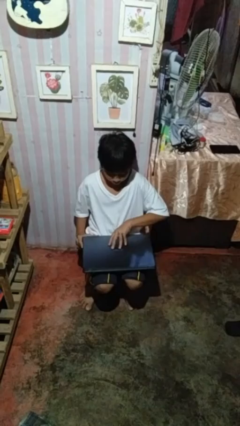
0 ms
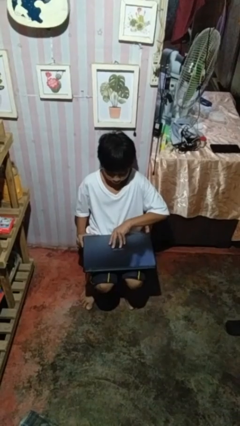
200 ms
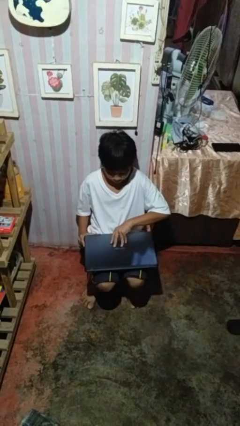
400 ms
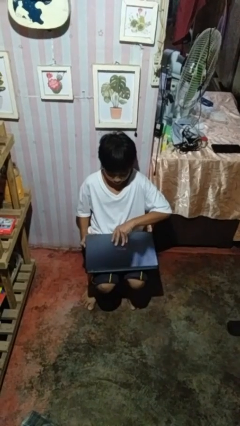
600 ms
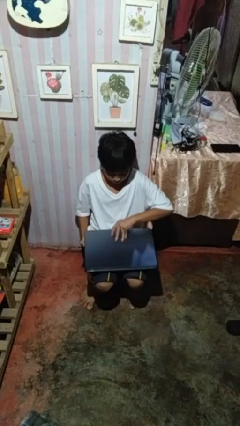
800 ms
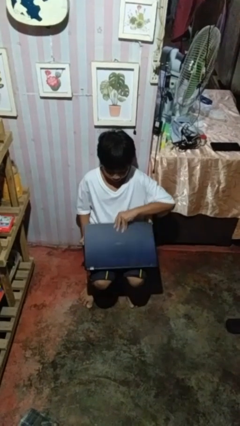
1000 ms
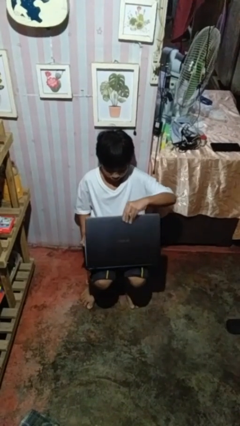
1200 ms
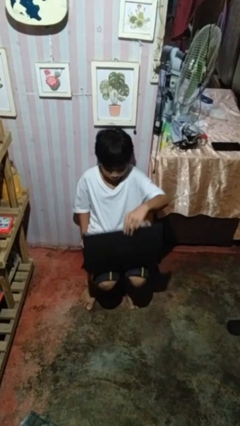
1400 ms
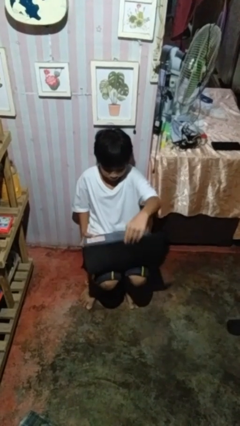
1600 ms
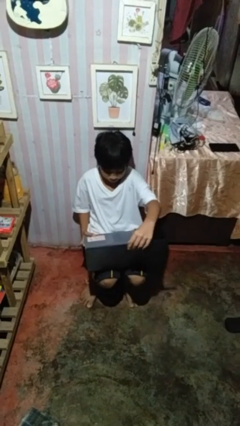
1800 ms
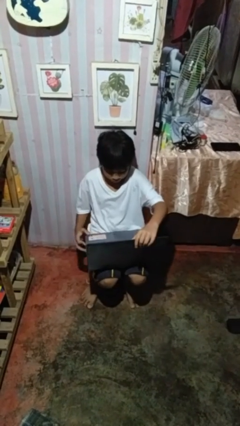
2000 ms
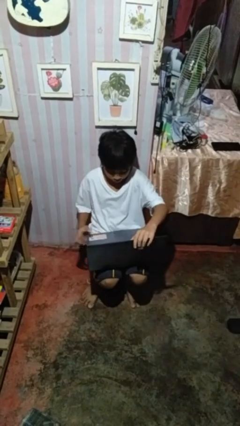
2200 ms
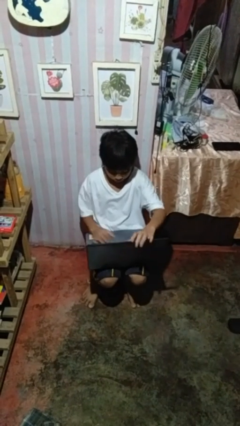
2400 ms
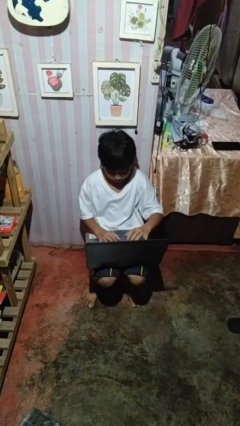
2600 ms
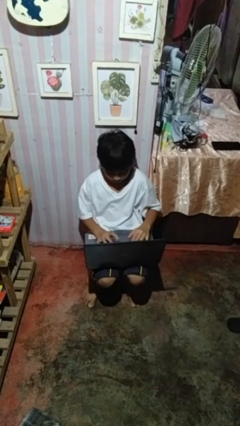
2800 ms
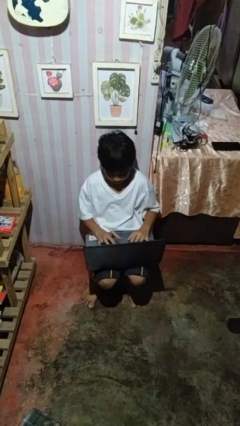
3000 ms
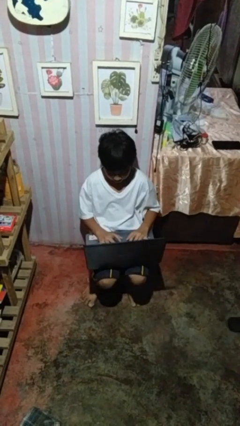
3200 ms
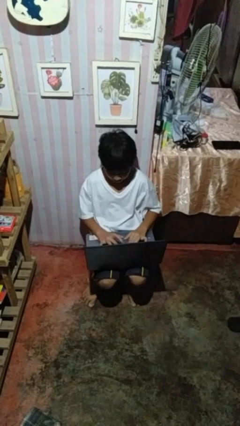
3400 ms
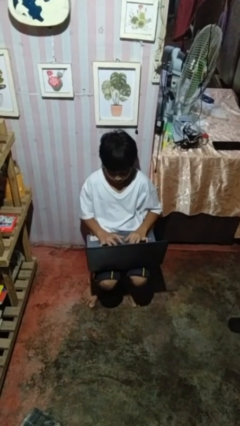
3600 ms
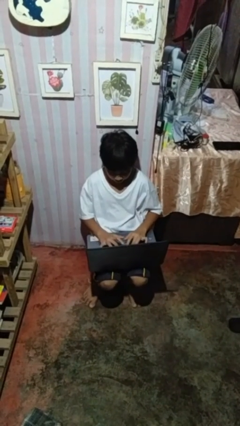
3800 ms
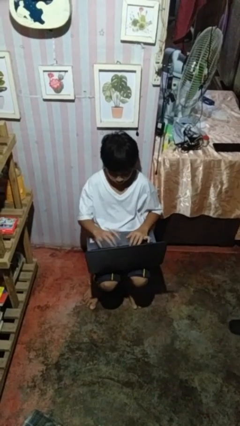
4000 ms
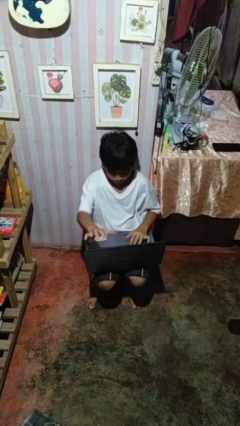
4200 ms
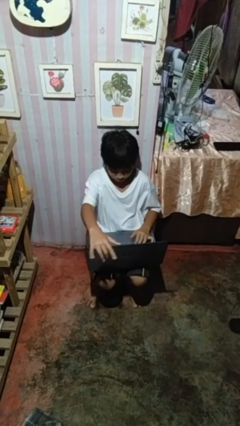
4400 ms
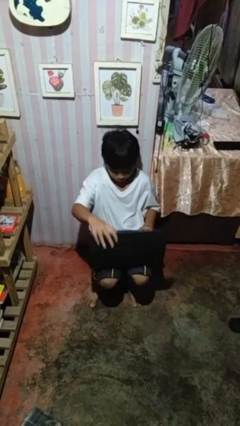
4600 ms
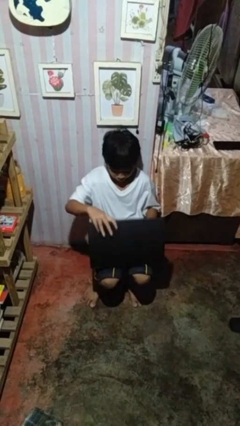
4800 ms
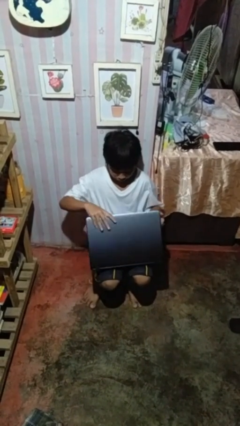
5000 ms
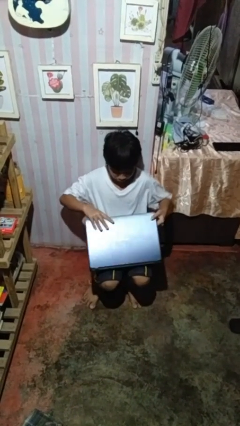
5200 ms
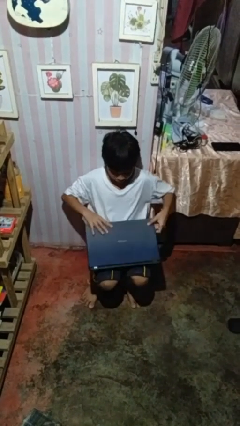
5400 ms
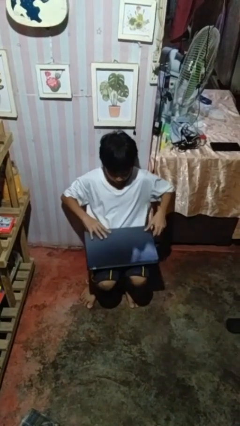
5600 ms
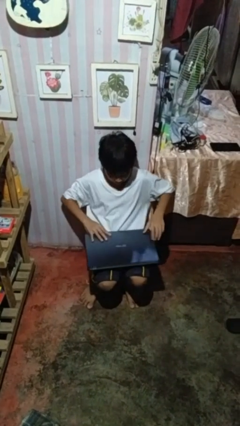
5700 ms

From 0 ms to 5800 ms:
person interacts with laptop

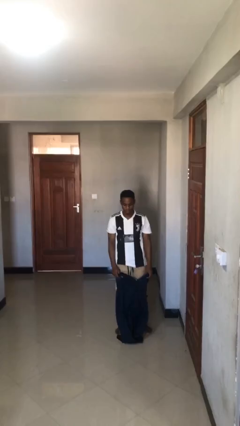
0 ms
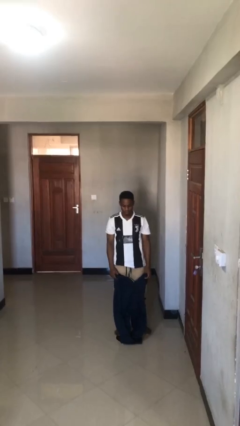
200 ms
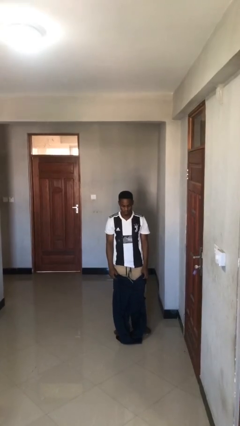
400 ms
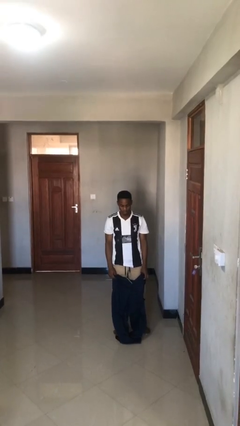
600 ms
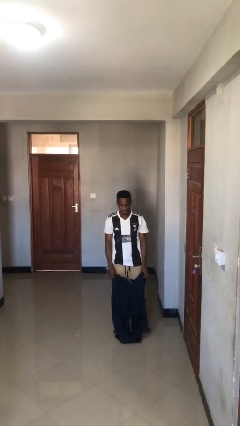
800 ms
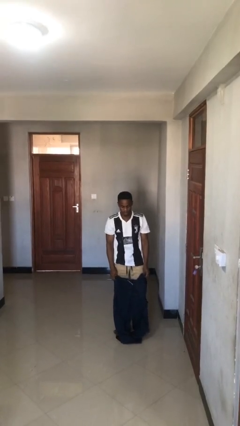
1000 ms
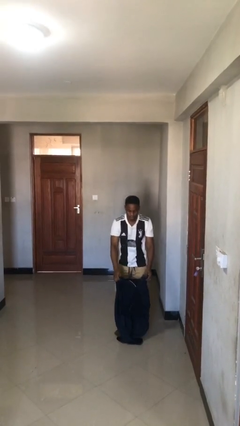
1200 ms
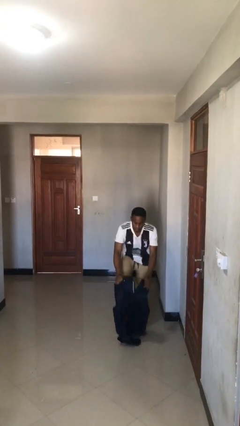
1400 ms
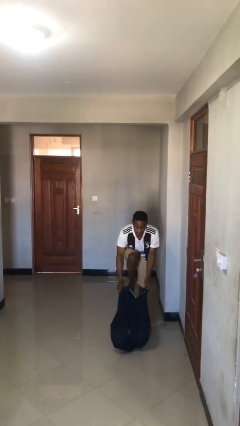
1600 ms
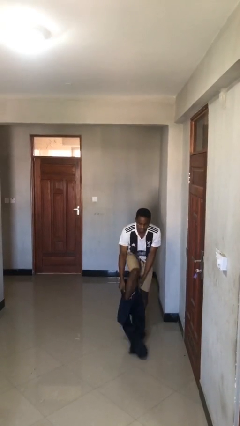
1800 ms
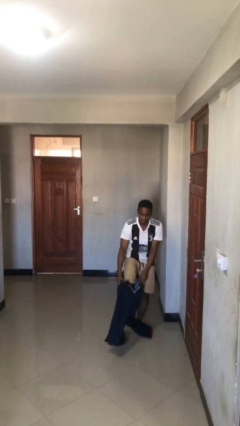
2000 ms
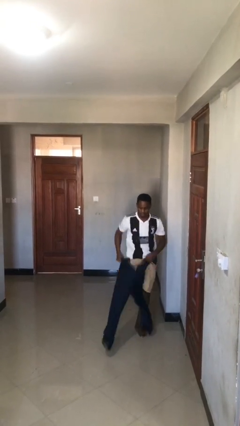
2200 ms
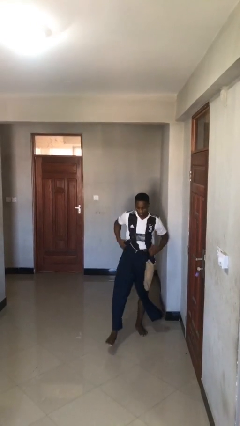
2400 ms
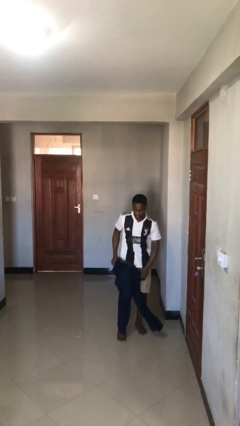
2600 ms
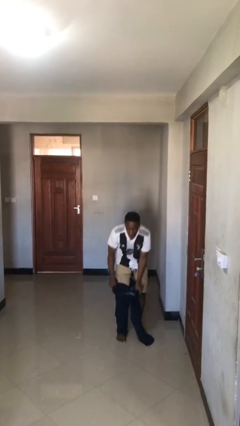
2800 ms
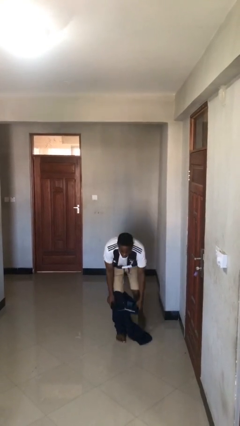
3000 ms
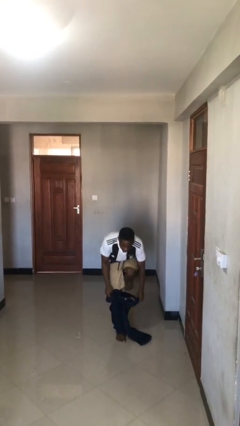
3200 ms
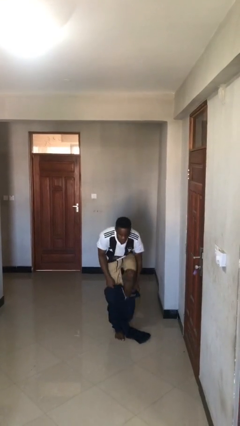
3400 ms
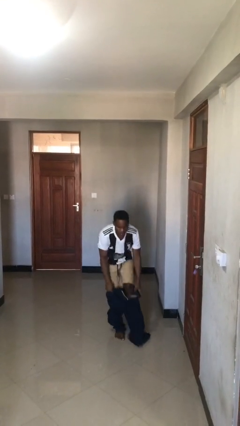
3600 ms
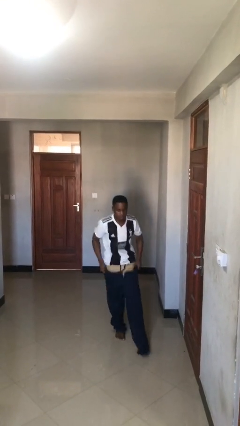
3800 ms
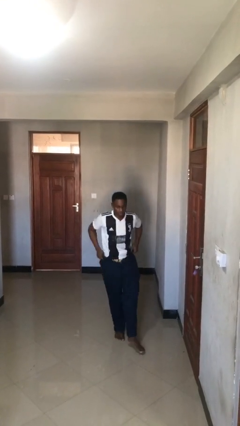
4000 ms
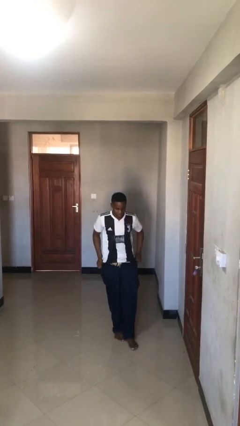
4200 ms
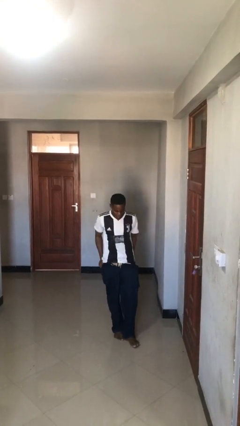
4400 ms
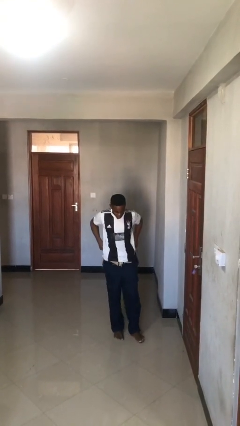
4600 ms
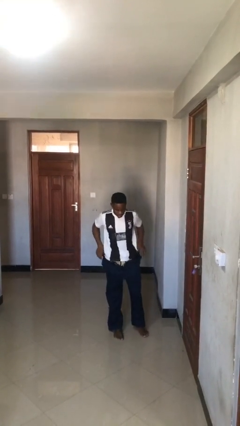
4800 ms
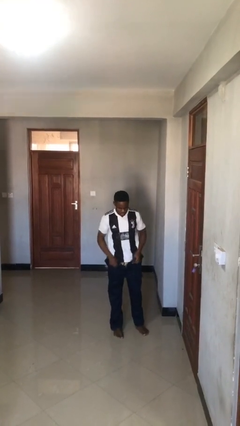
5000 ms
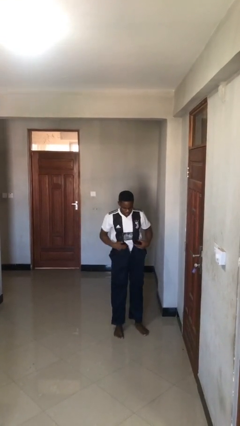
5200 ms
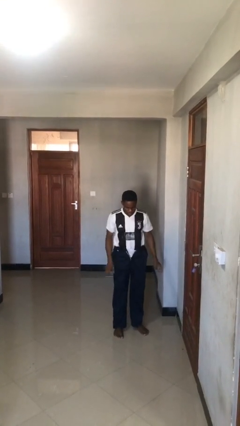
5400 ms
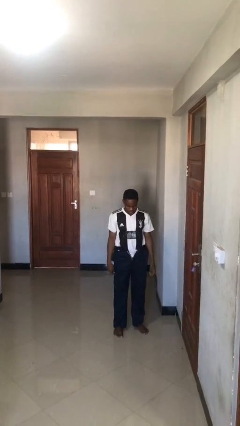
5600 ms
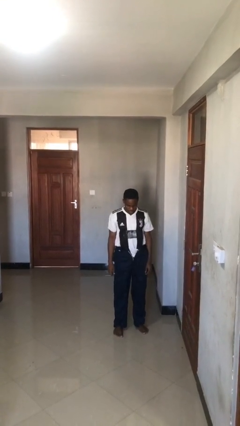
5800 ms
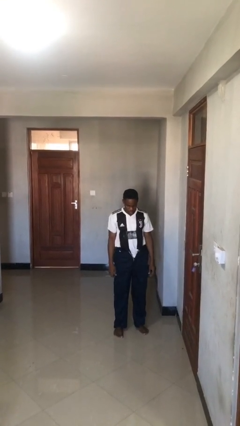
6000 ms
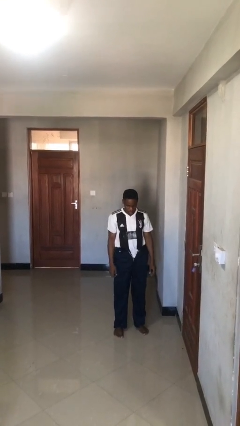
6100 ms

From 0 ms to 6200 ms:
person puts on pants

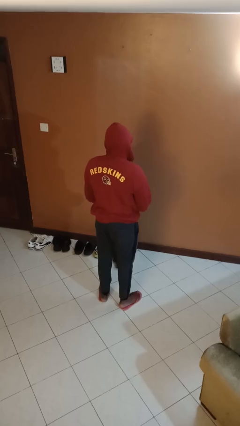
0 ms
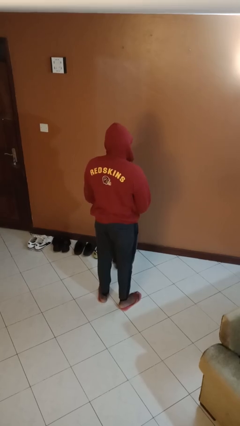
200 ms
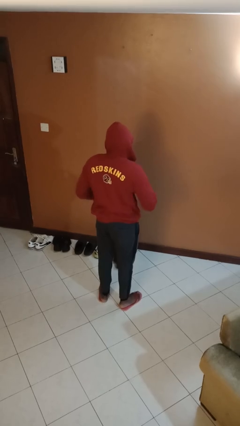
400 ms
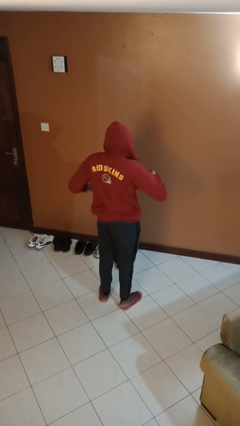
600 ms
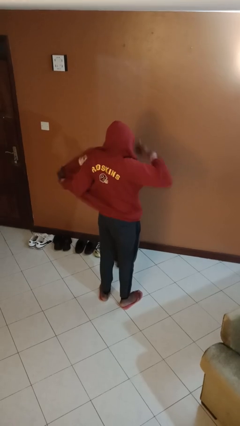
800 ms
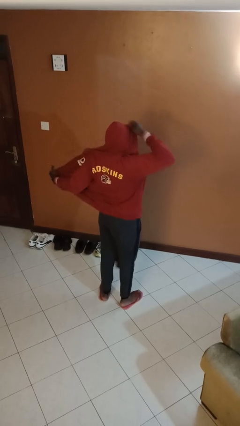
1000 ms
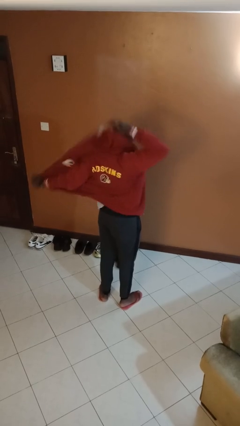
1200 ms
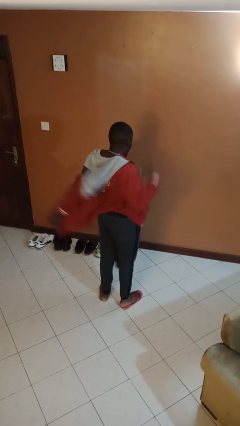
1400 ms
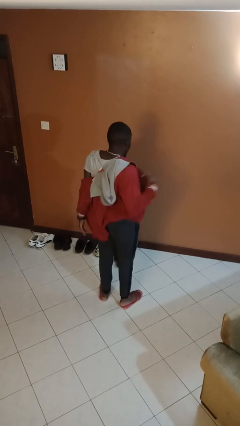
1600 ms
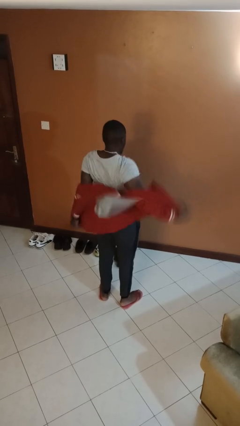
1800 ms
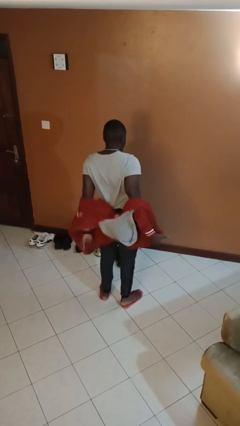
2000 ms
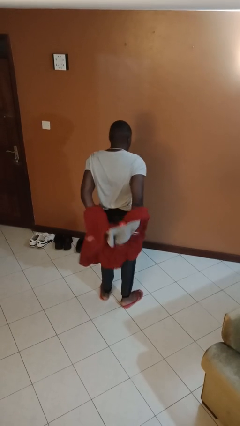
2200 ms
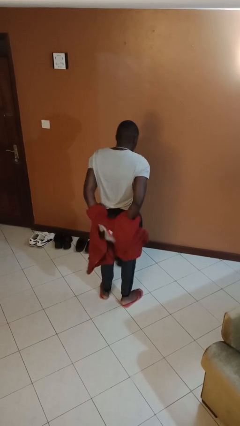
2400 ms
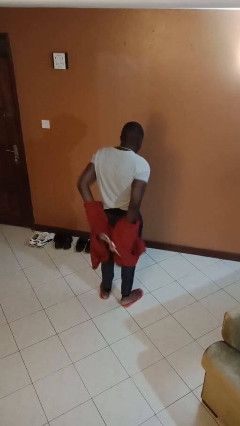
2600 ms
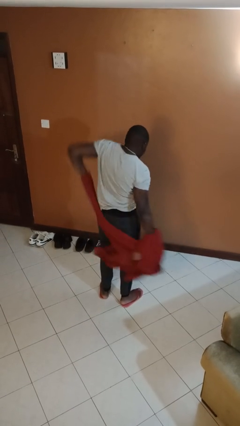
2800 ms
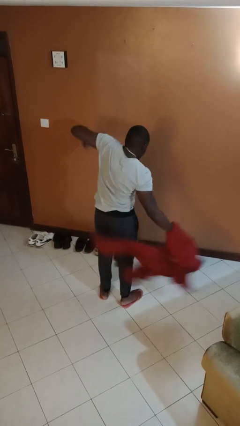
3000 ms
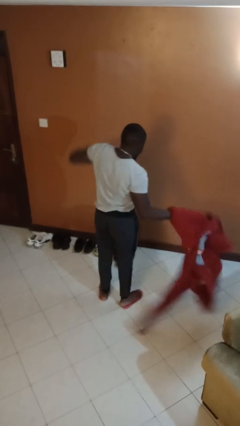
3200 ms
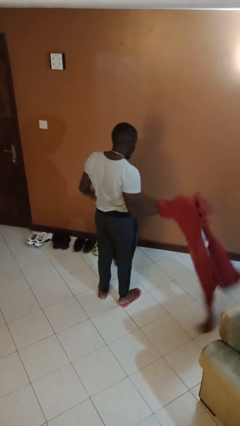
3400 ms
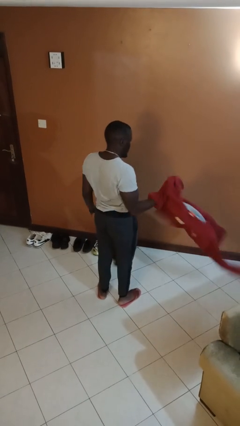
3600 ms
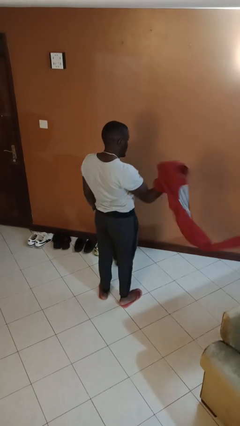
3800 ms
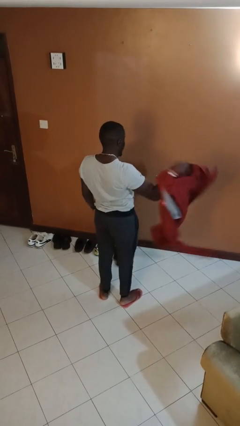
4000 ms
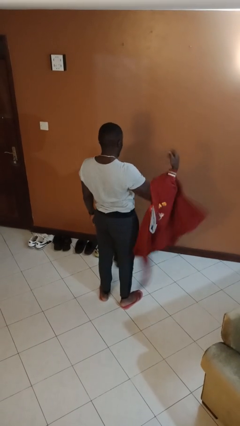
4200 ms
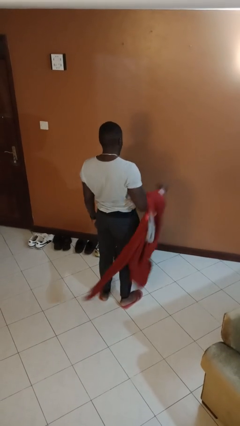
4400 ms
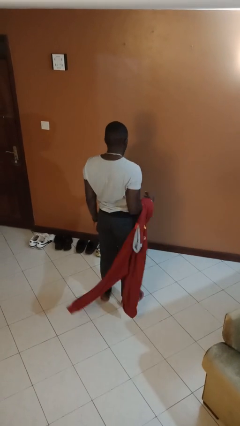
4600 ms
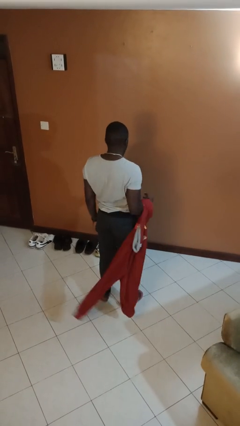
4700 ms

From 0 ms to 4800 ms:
person takes off hoodie

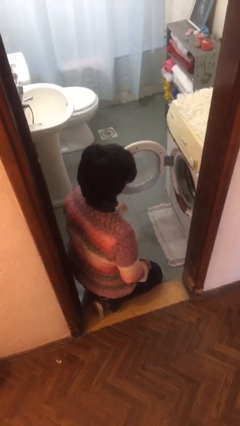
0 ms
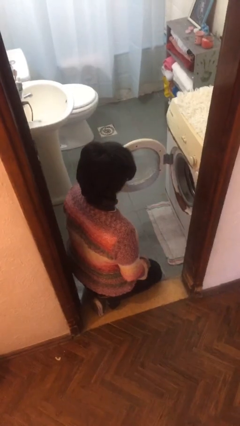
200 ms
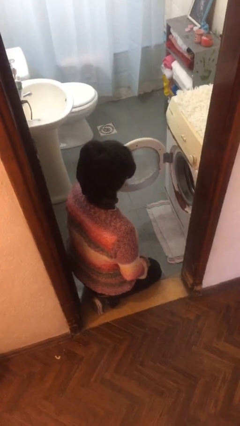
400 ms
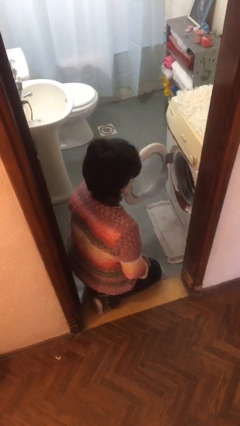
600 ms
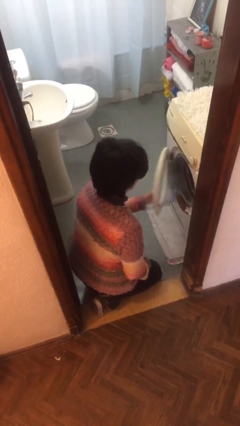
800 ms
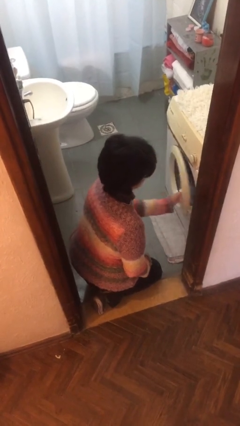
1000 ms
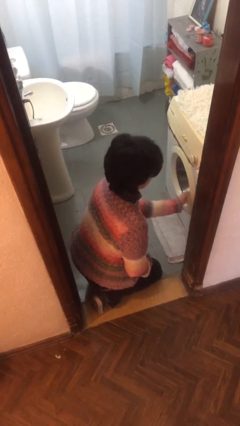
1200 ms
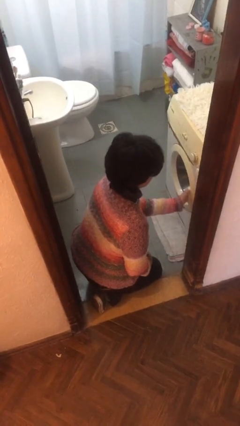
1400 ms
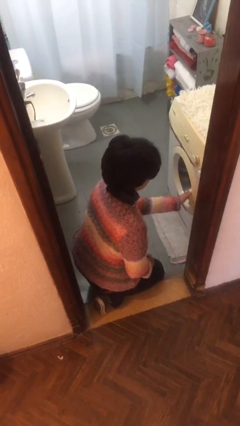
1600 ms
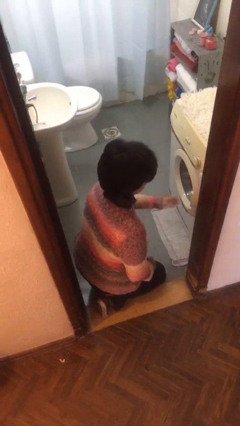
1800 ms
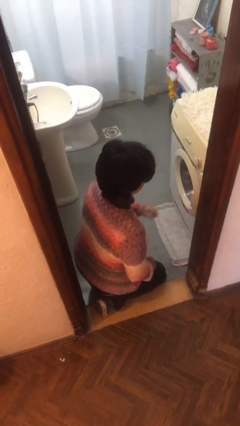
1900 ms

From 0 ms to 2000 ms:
person closes clothes washer
